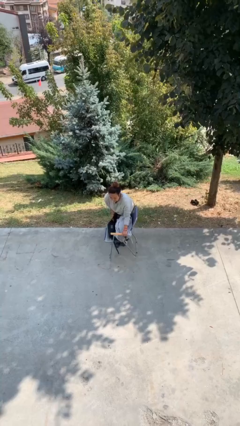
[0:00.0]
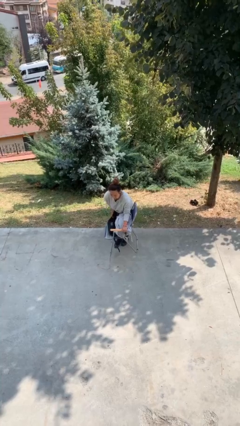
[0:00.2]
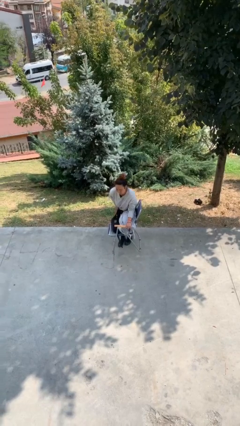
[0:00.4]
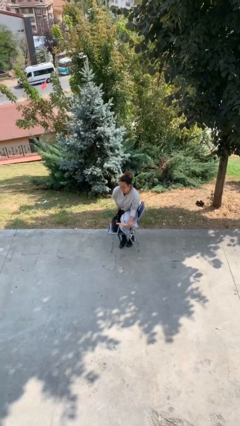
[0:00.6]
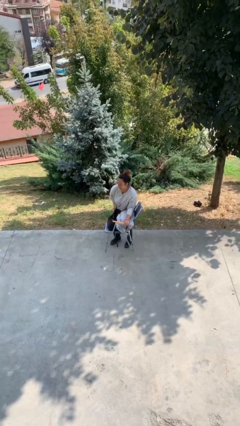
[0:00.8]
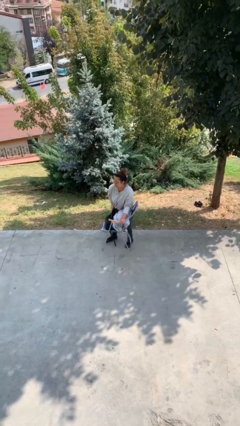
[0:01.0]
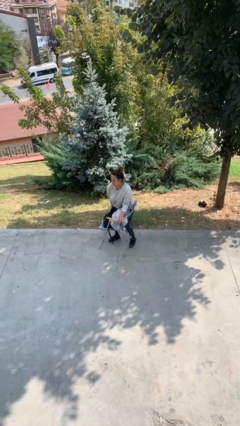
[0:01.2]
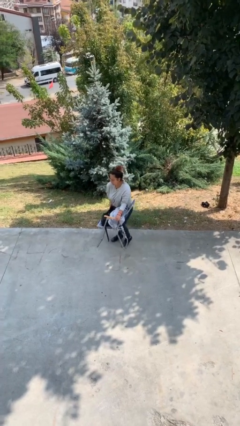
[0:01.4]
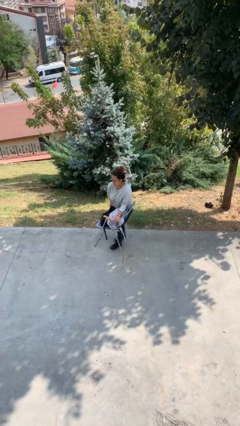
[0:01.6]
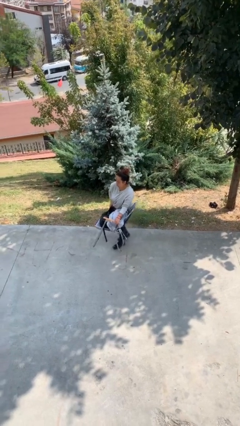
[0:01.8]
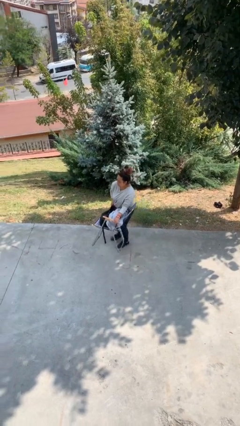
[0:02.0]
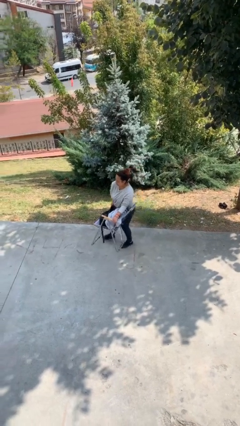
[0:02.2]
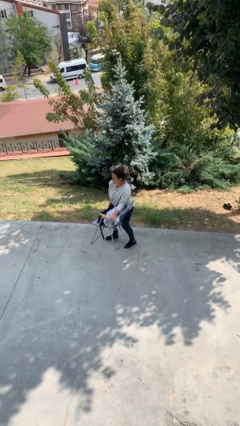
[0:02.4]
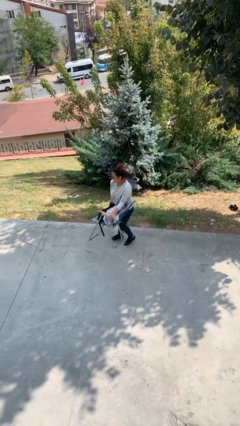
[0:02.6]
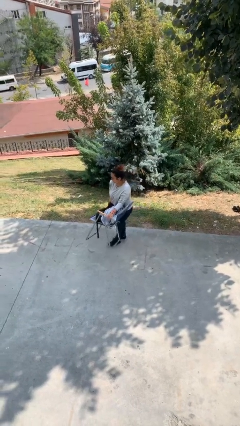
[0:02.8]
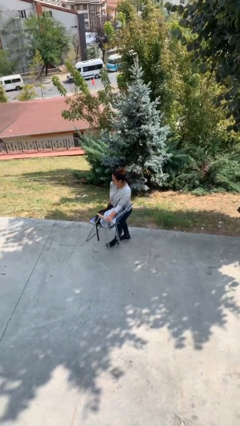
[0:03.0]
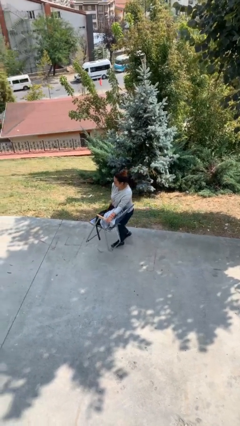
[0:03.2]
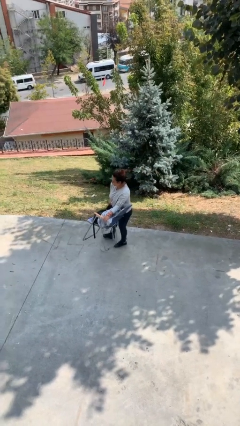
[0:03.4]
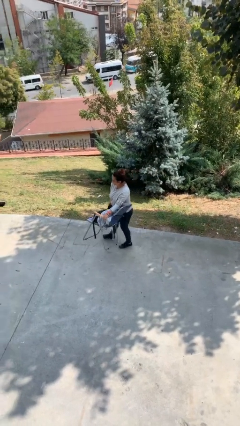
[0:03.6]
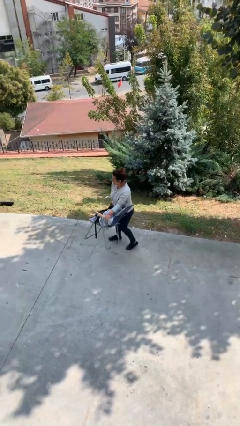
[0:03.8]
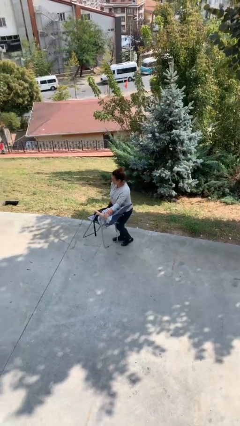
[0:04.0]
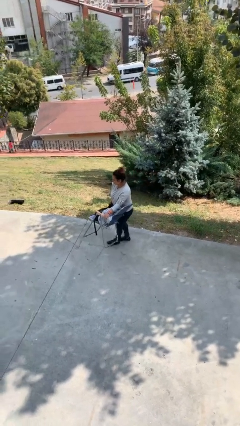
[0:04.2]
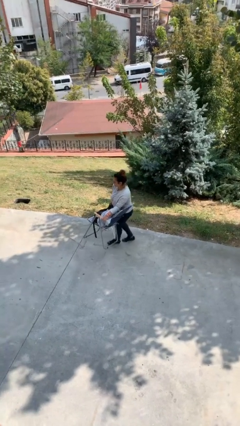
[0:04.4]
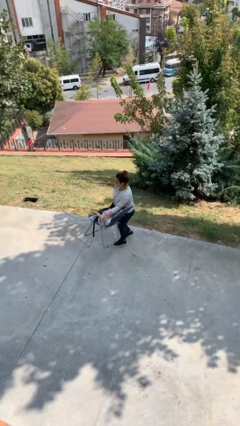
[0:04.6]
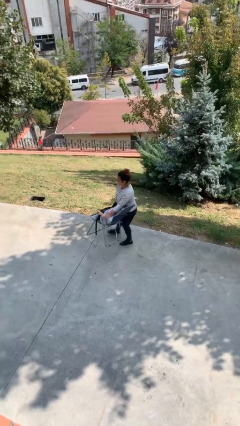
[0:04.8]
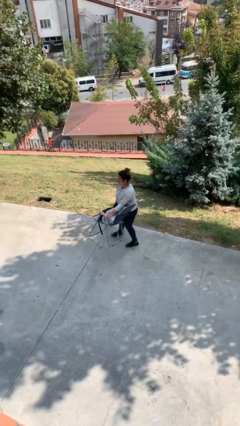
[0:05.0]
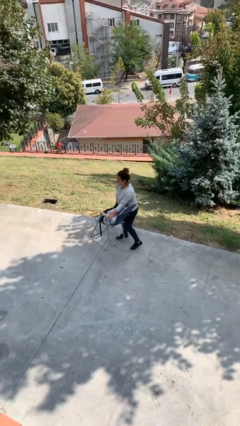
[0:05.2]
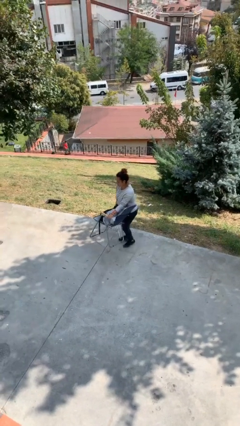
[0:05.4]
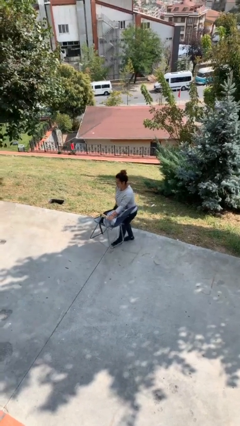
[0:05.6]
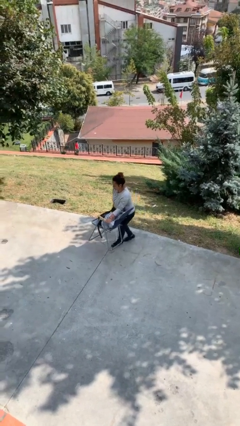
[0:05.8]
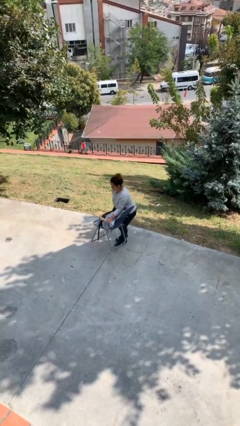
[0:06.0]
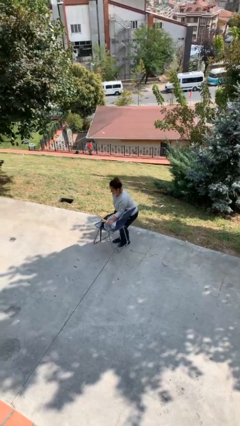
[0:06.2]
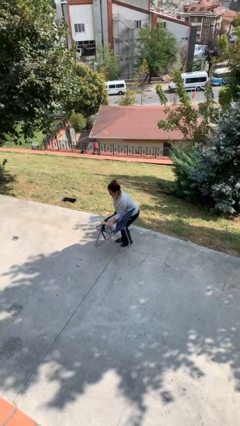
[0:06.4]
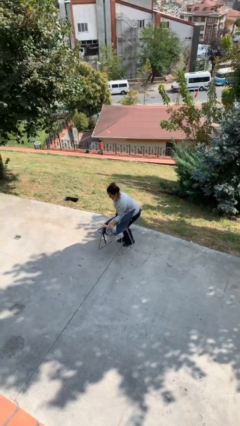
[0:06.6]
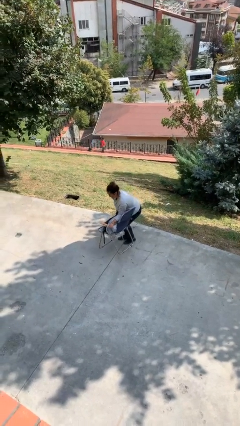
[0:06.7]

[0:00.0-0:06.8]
person carries heavy object

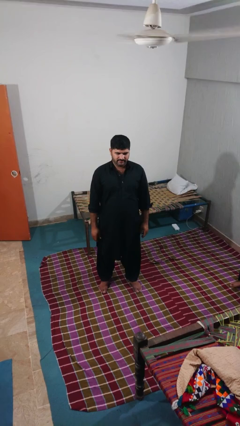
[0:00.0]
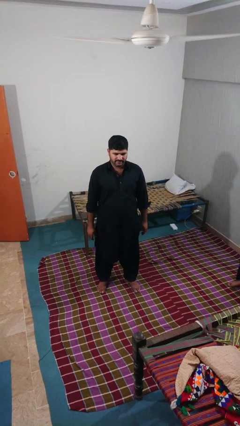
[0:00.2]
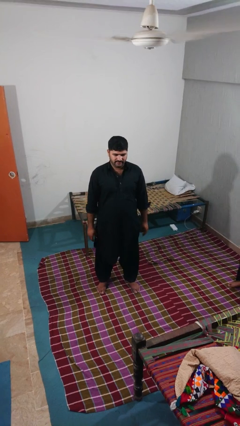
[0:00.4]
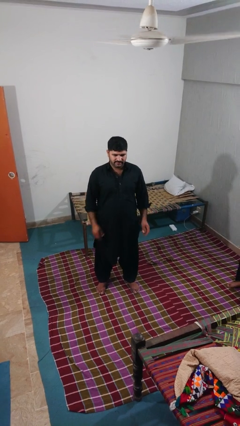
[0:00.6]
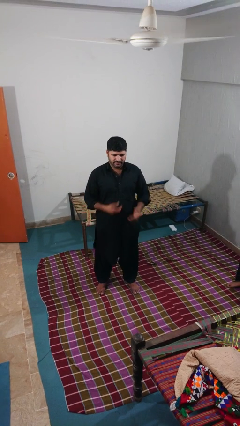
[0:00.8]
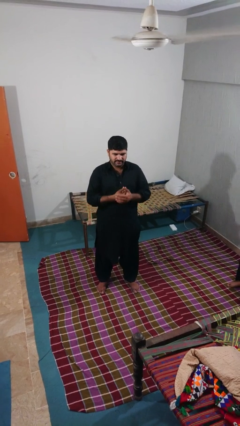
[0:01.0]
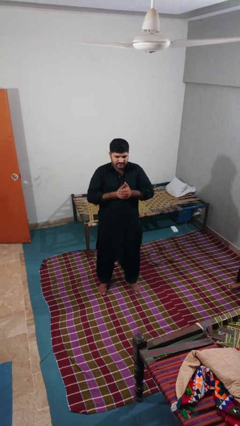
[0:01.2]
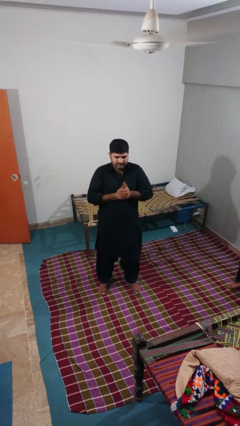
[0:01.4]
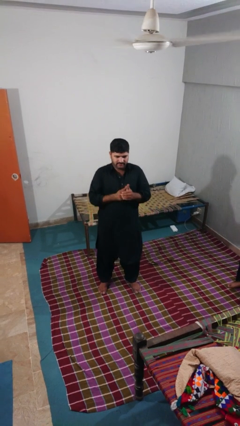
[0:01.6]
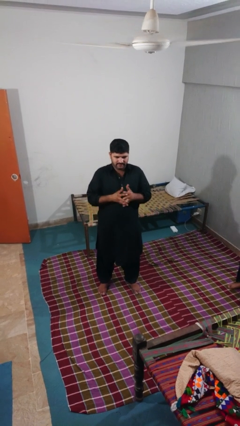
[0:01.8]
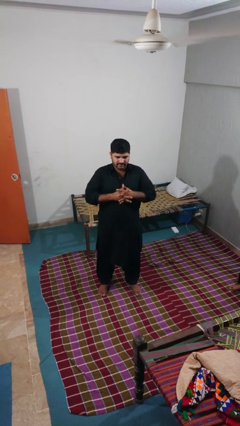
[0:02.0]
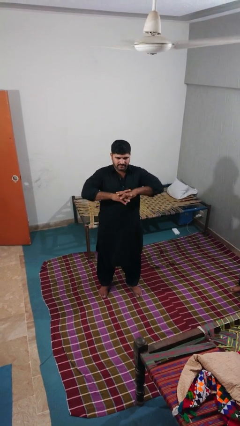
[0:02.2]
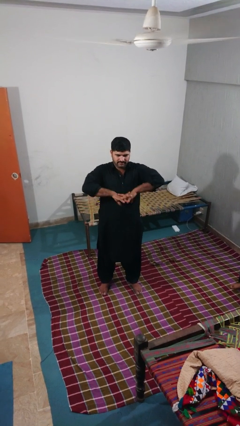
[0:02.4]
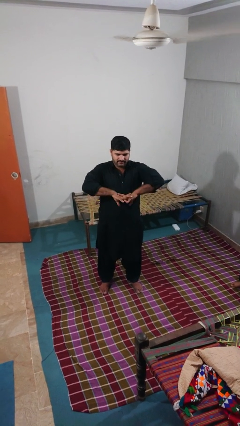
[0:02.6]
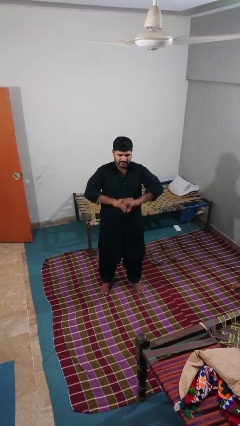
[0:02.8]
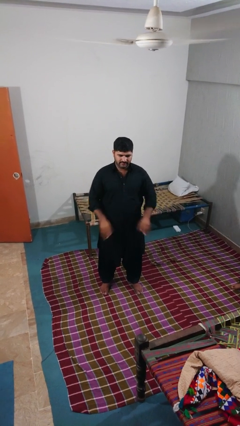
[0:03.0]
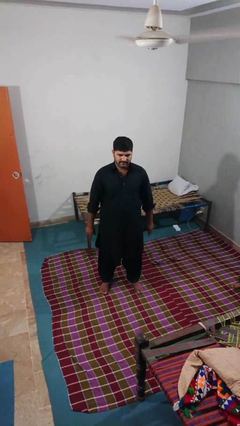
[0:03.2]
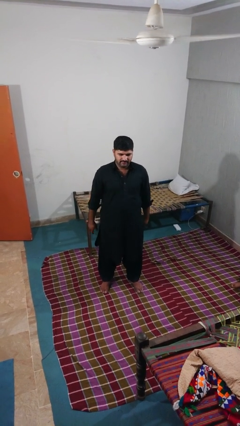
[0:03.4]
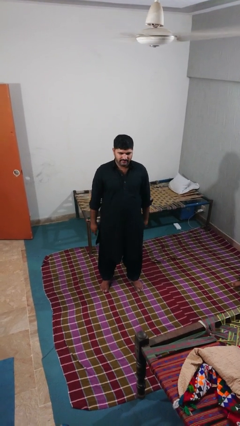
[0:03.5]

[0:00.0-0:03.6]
person cracks knuckles

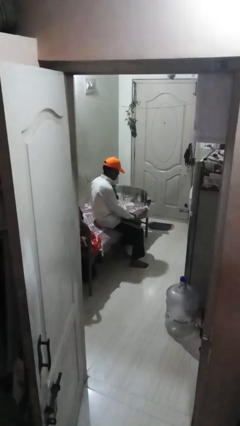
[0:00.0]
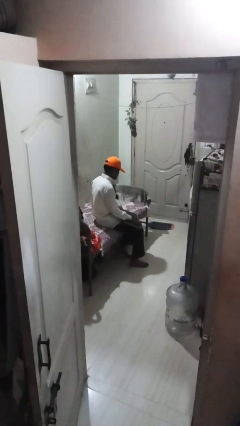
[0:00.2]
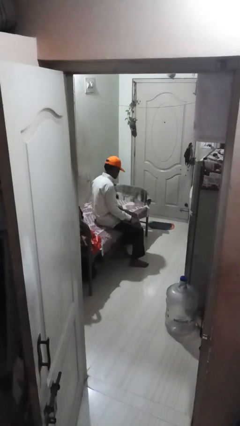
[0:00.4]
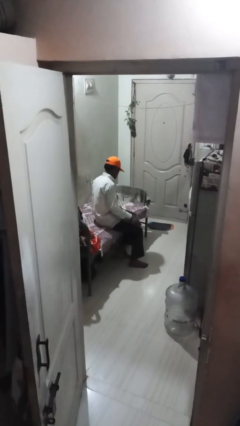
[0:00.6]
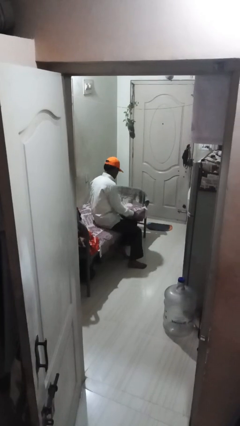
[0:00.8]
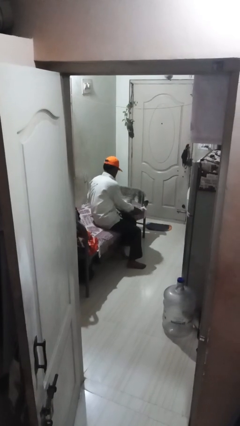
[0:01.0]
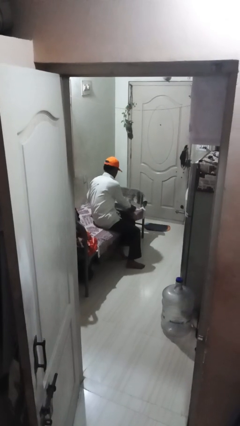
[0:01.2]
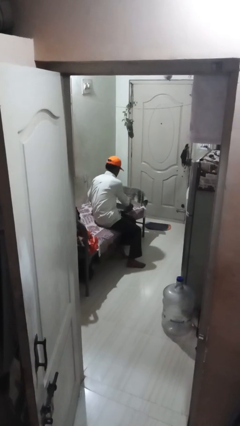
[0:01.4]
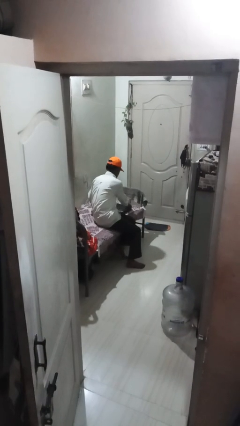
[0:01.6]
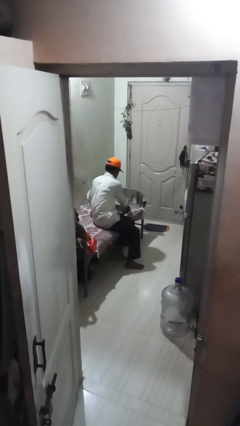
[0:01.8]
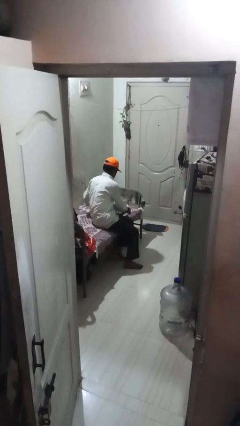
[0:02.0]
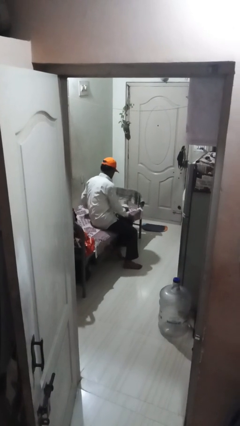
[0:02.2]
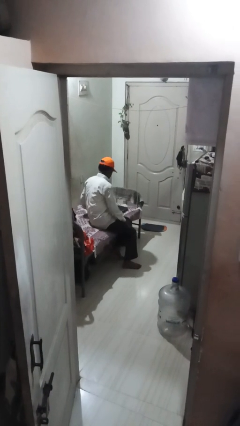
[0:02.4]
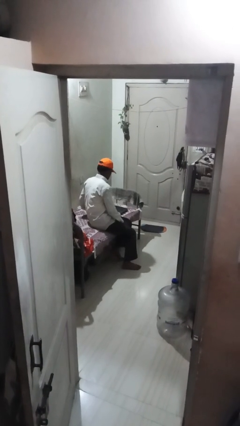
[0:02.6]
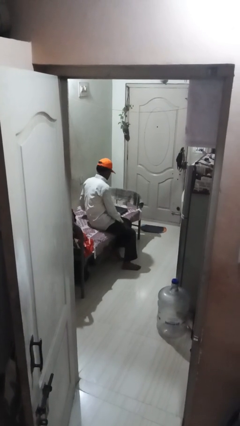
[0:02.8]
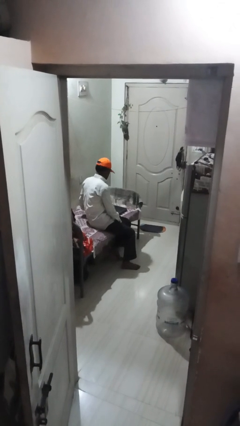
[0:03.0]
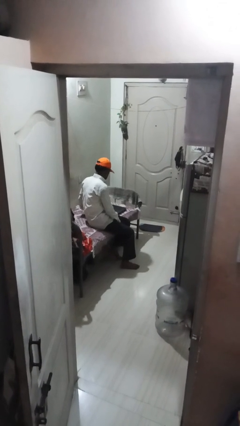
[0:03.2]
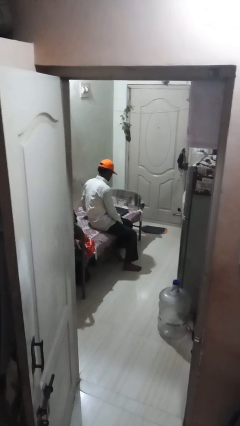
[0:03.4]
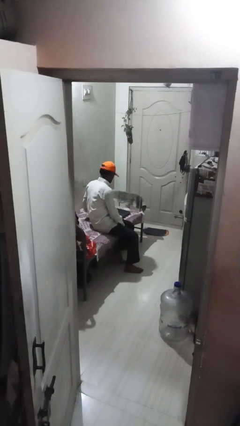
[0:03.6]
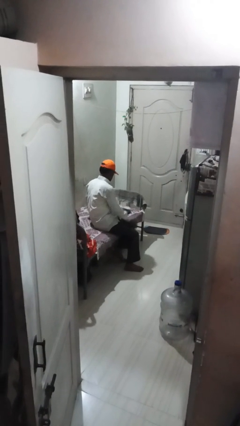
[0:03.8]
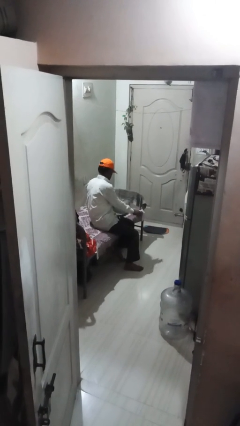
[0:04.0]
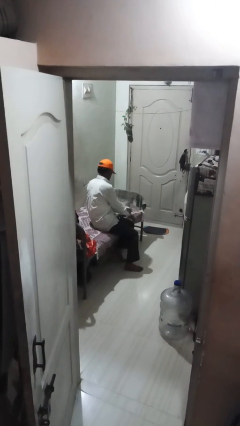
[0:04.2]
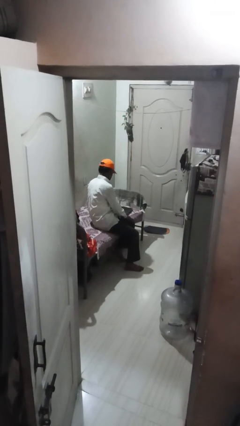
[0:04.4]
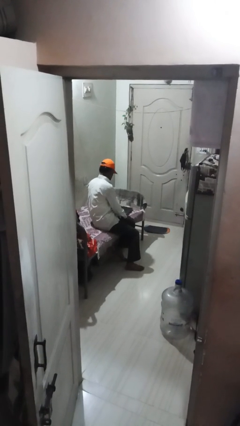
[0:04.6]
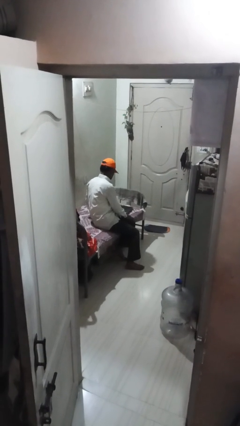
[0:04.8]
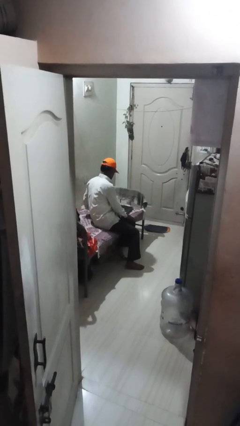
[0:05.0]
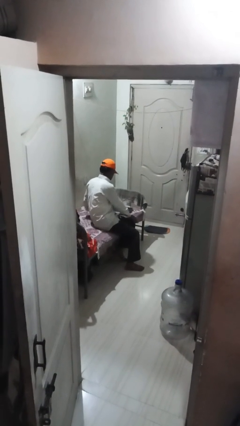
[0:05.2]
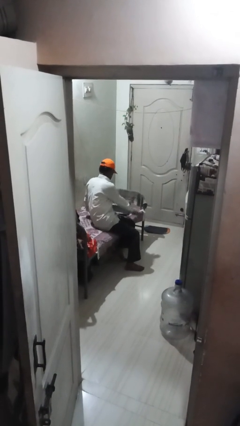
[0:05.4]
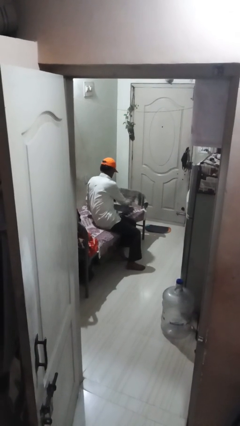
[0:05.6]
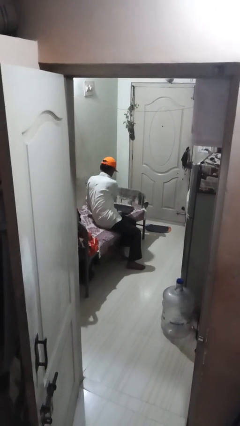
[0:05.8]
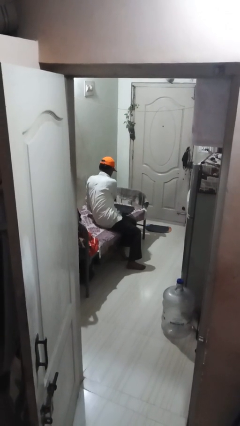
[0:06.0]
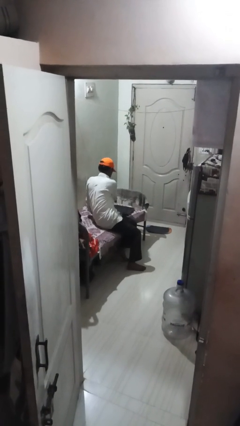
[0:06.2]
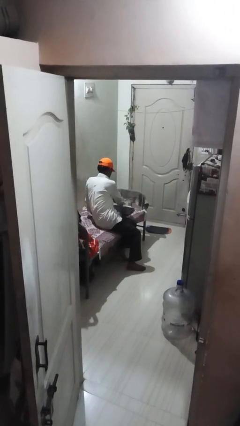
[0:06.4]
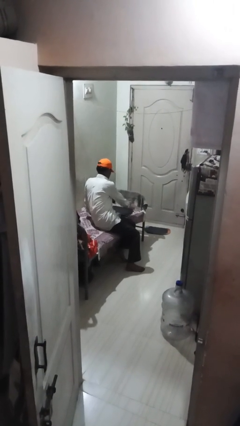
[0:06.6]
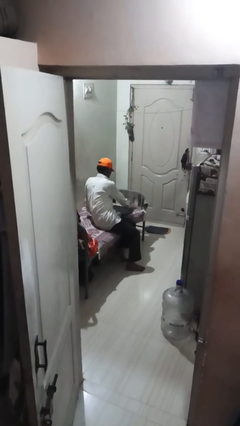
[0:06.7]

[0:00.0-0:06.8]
person waves hand over object

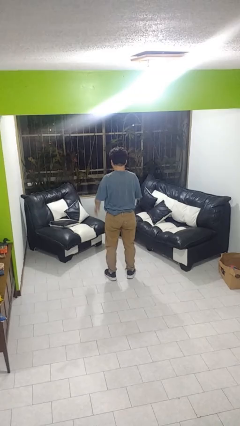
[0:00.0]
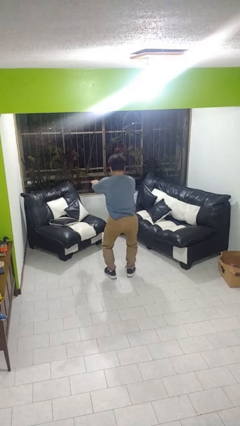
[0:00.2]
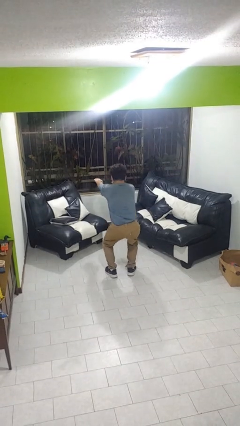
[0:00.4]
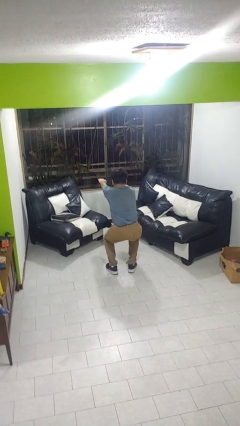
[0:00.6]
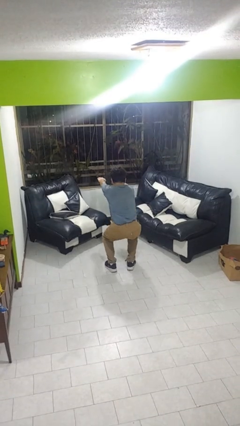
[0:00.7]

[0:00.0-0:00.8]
person squats
